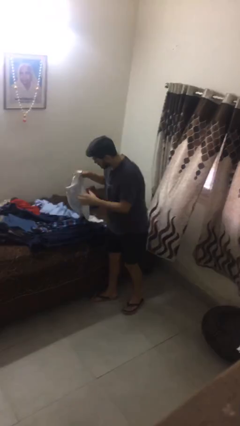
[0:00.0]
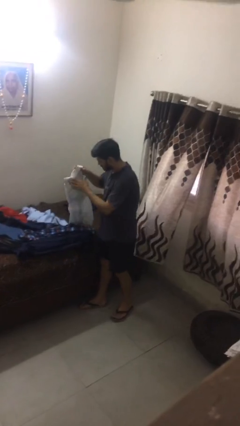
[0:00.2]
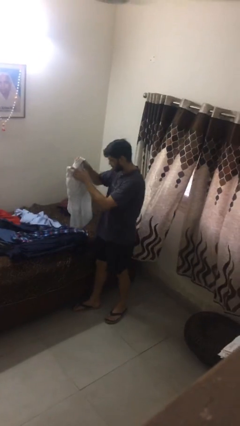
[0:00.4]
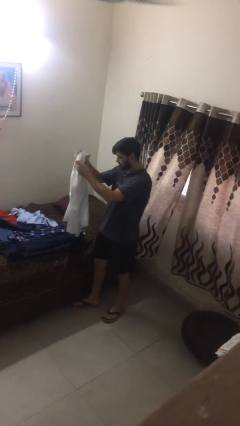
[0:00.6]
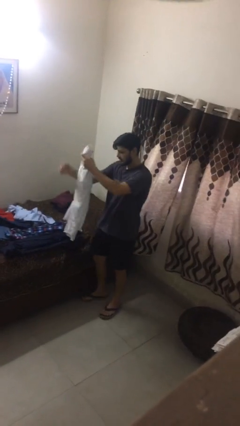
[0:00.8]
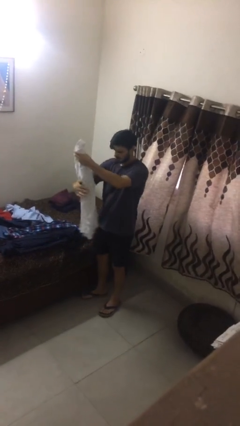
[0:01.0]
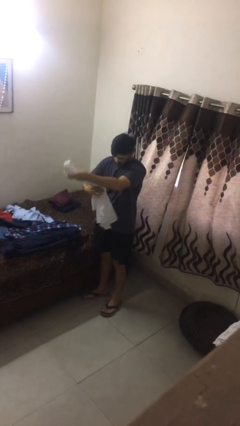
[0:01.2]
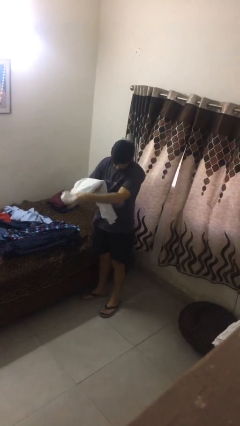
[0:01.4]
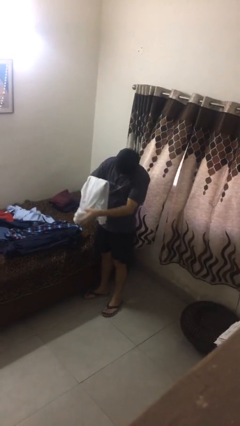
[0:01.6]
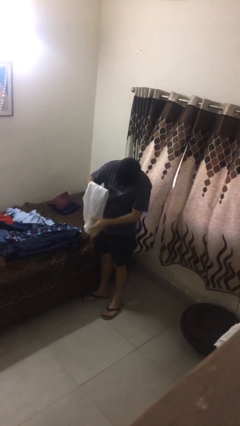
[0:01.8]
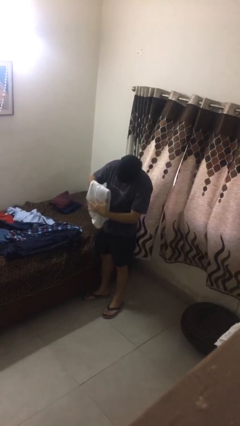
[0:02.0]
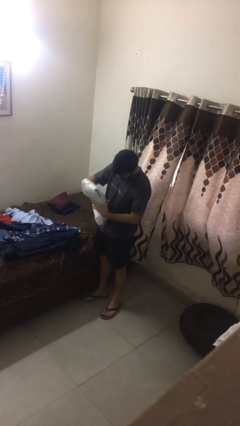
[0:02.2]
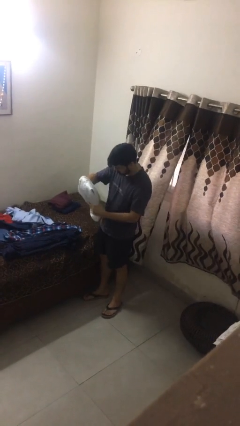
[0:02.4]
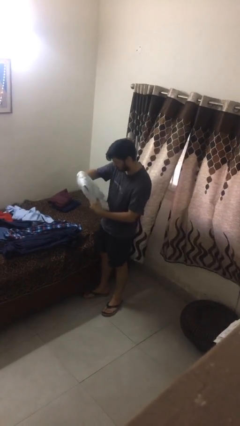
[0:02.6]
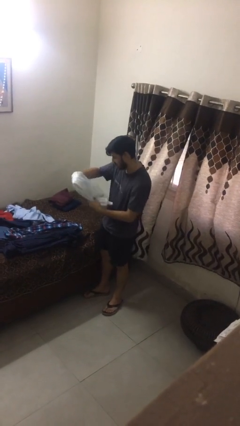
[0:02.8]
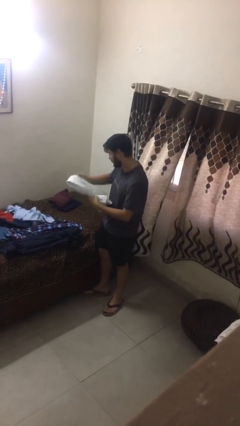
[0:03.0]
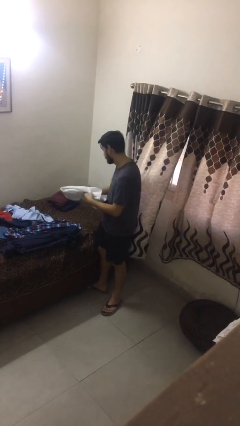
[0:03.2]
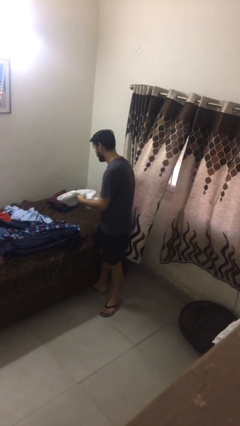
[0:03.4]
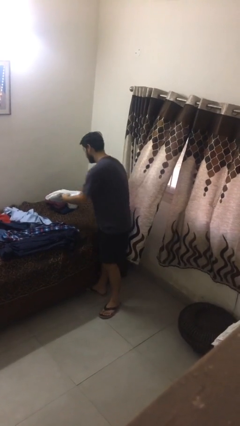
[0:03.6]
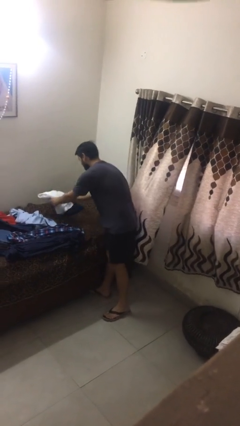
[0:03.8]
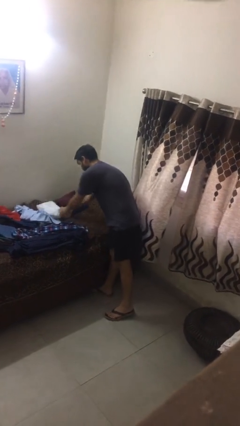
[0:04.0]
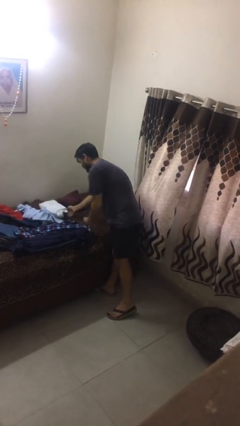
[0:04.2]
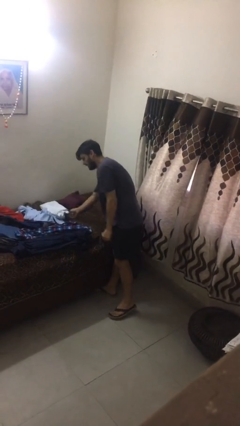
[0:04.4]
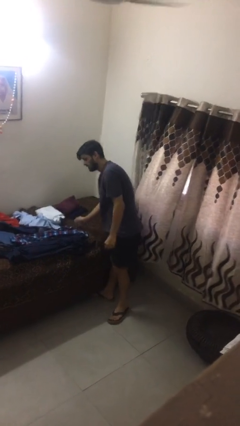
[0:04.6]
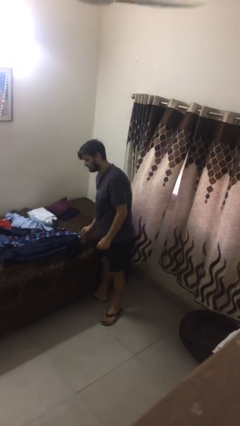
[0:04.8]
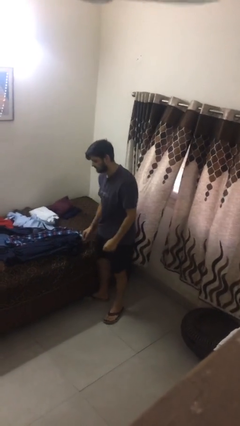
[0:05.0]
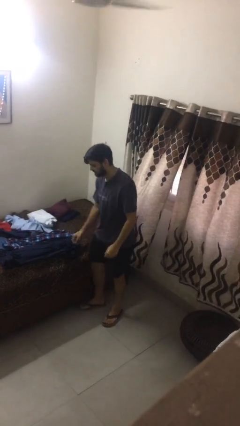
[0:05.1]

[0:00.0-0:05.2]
person folds shirt

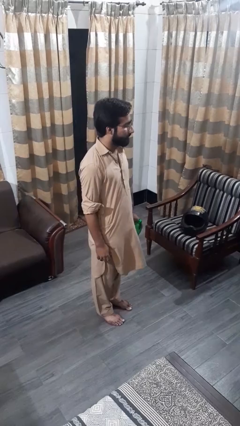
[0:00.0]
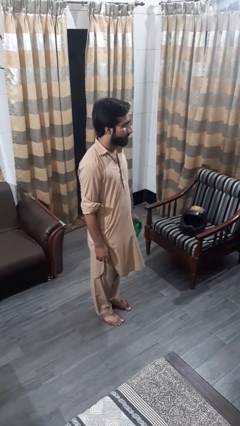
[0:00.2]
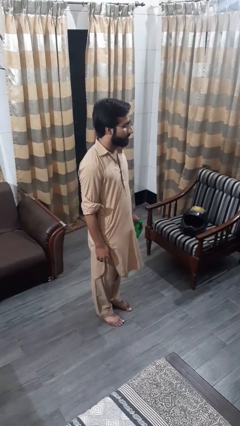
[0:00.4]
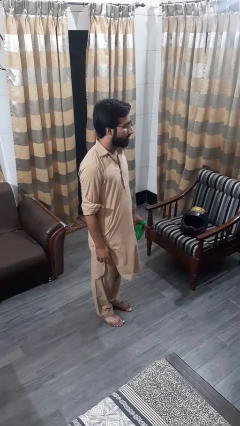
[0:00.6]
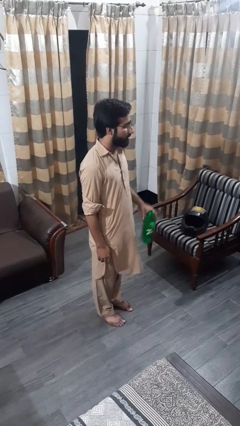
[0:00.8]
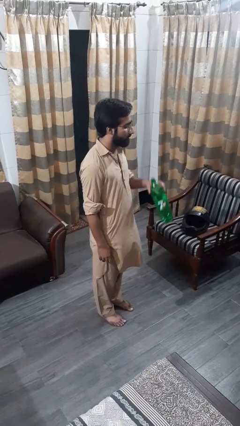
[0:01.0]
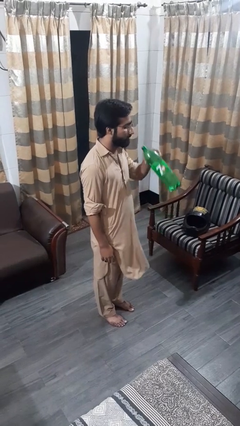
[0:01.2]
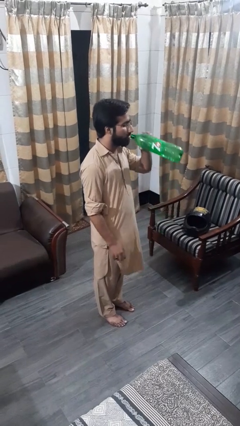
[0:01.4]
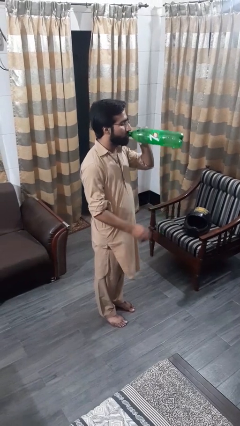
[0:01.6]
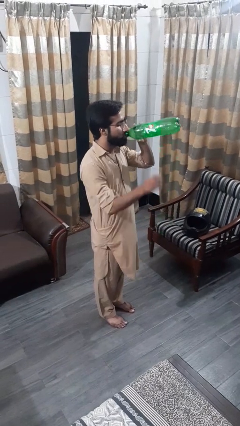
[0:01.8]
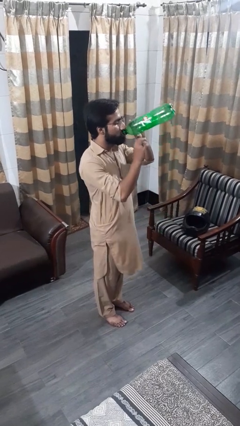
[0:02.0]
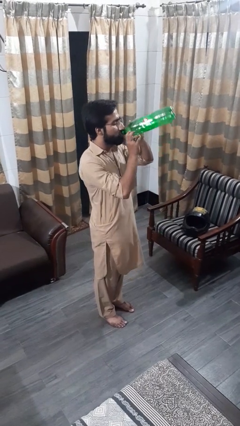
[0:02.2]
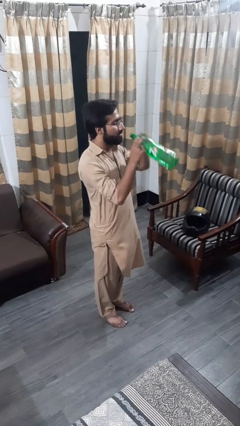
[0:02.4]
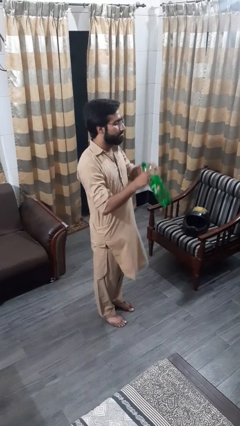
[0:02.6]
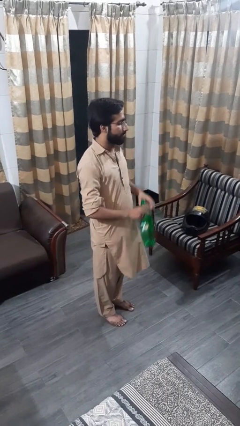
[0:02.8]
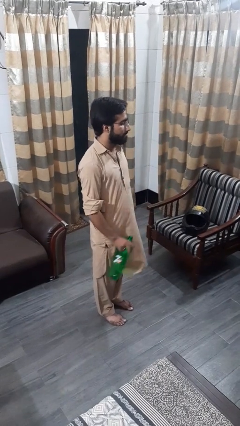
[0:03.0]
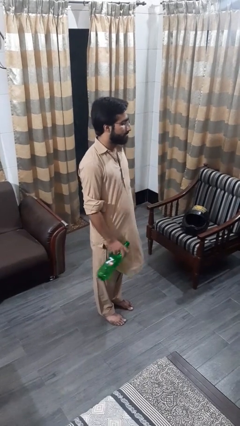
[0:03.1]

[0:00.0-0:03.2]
person drinks from bottle

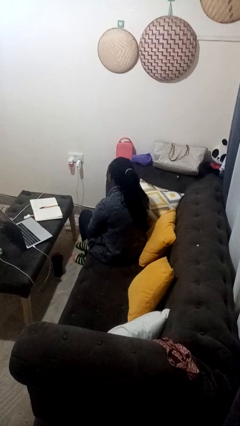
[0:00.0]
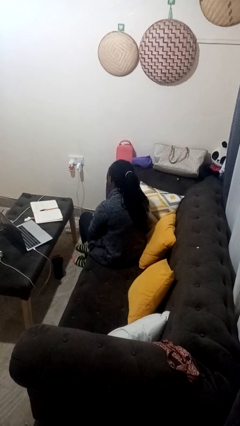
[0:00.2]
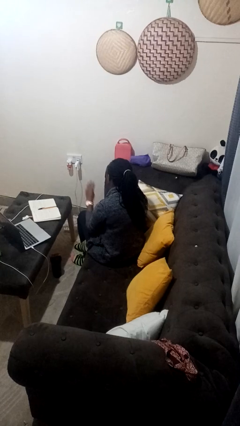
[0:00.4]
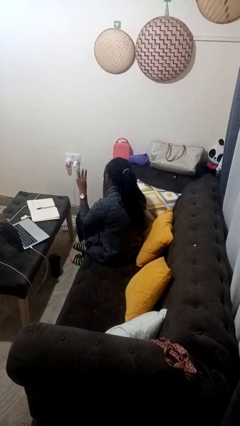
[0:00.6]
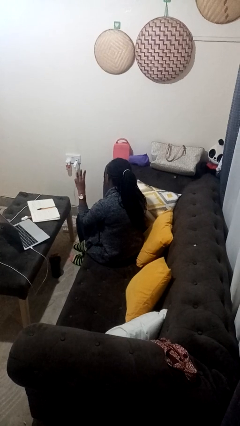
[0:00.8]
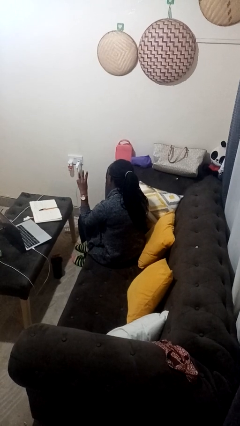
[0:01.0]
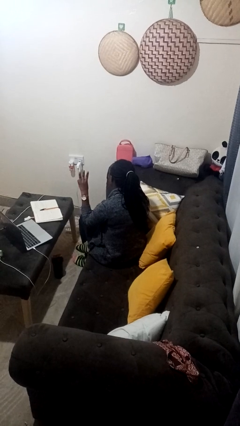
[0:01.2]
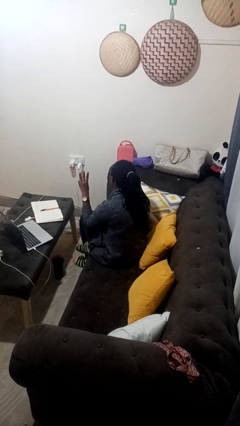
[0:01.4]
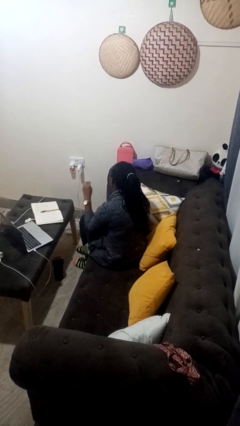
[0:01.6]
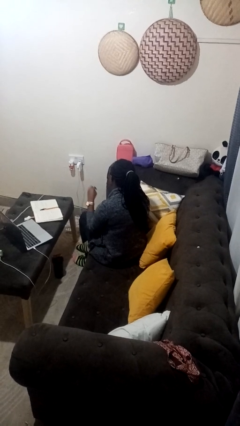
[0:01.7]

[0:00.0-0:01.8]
person gestures number three

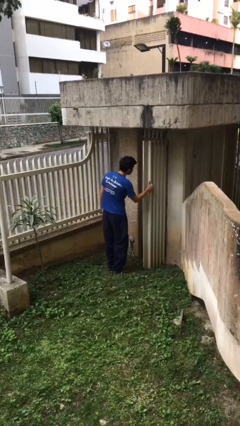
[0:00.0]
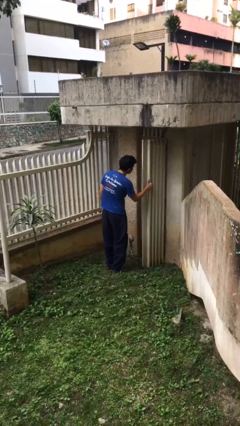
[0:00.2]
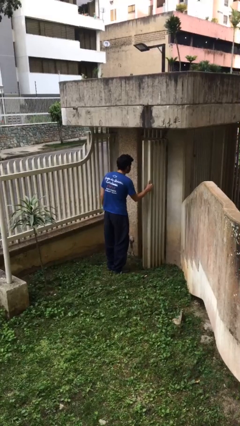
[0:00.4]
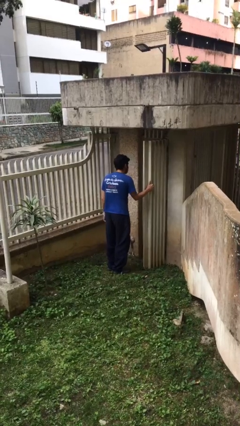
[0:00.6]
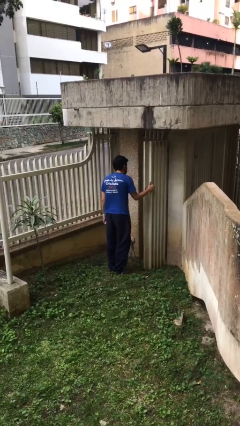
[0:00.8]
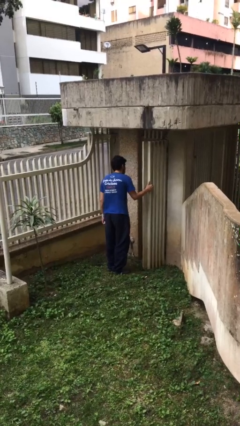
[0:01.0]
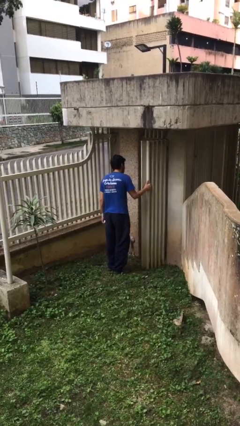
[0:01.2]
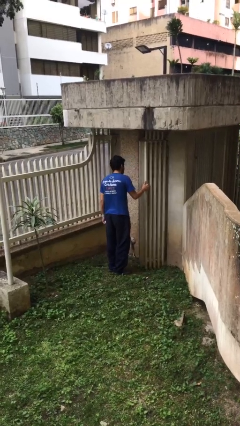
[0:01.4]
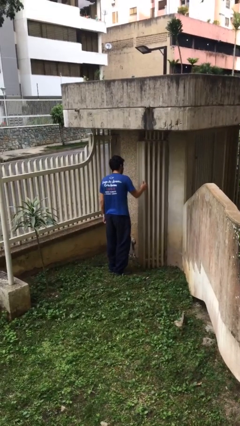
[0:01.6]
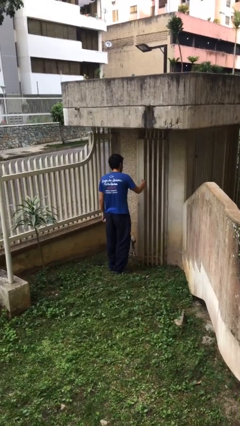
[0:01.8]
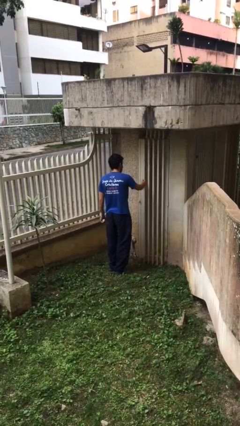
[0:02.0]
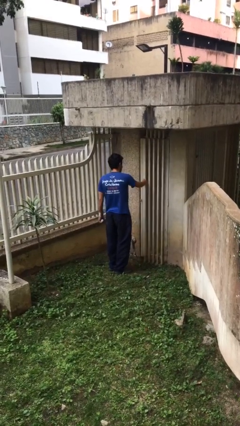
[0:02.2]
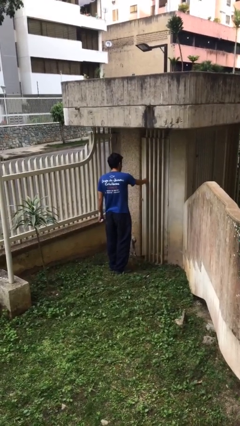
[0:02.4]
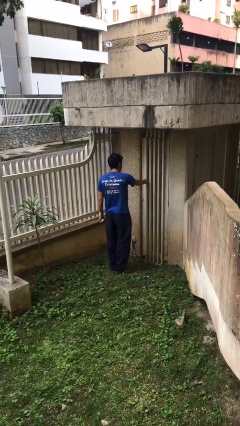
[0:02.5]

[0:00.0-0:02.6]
person closes facility door

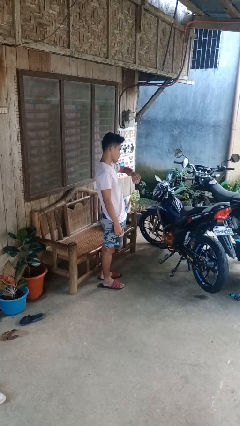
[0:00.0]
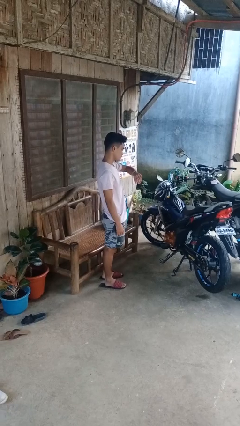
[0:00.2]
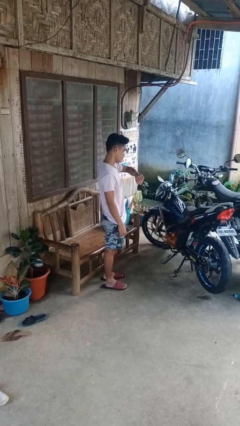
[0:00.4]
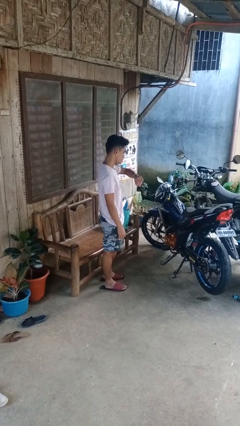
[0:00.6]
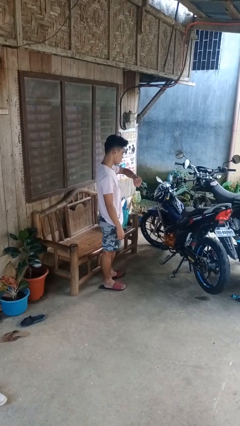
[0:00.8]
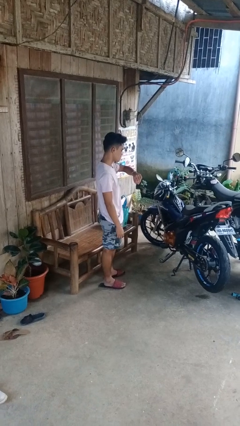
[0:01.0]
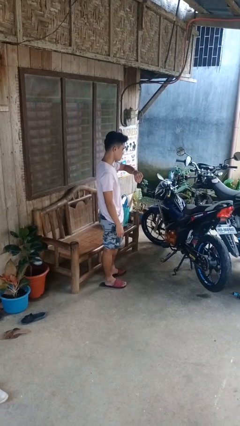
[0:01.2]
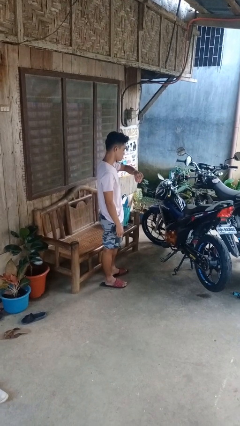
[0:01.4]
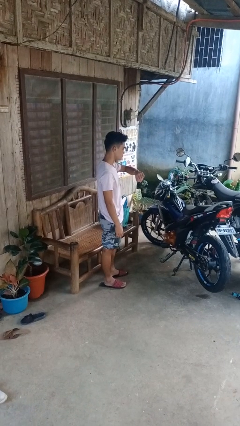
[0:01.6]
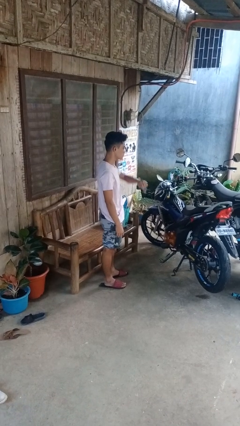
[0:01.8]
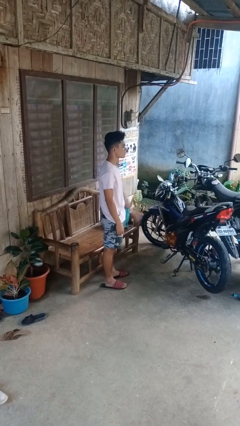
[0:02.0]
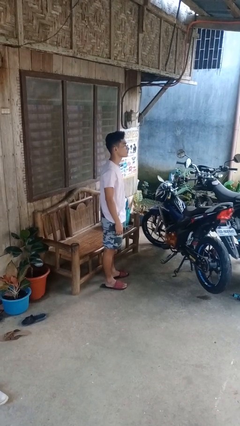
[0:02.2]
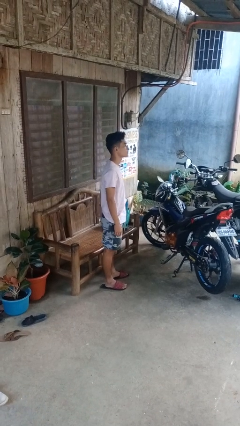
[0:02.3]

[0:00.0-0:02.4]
person looks at wristwatch

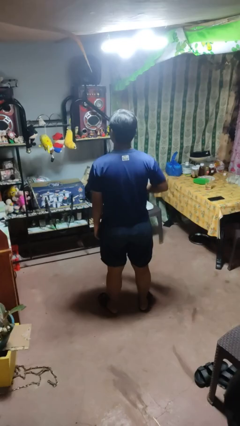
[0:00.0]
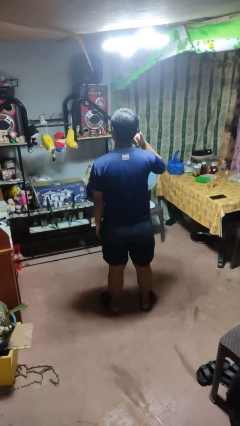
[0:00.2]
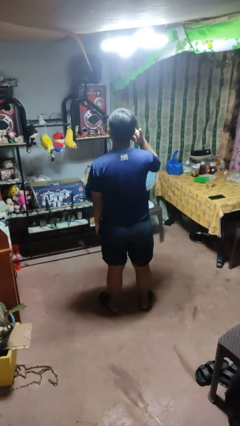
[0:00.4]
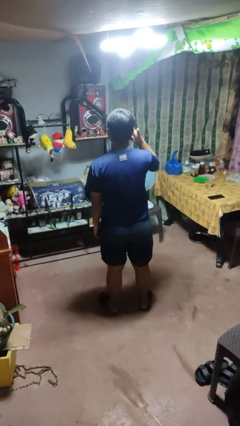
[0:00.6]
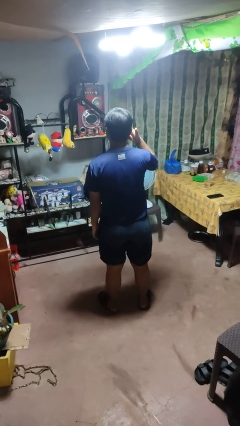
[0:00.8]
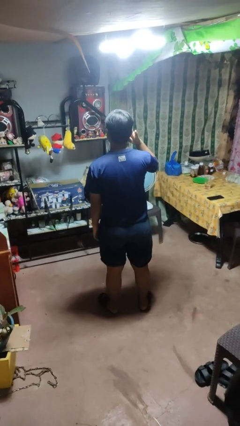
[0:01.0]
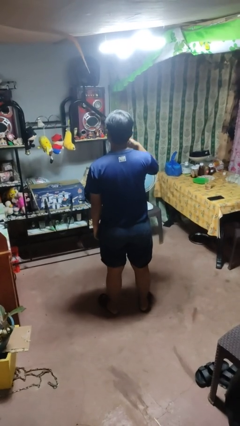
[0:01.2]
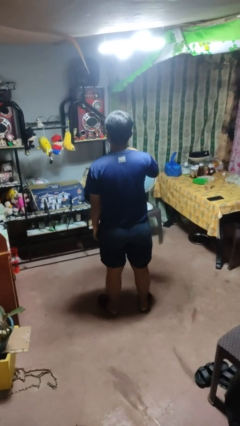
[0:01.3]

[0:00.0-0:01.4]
person gestures call me

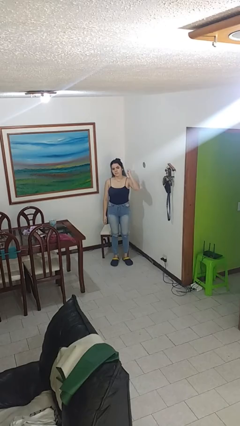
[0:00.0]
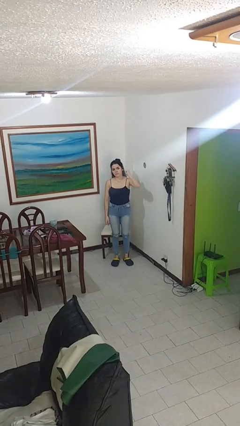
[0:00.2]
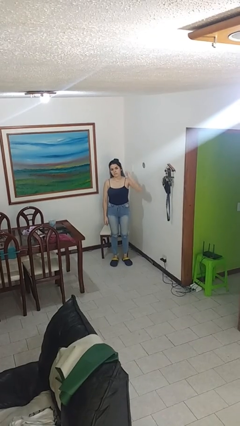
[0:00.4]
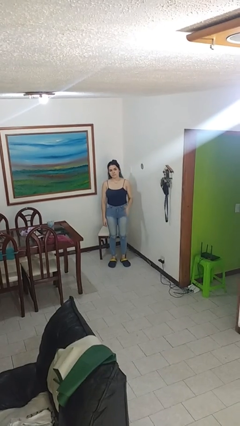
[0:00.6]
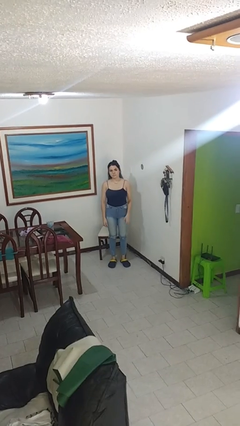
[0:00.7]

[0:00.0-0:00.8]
person gestures behind me
